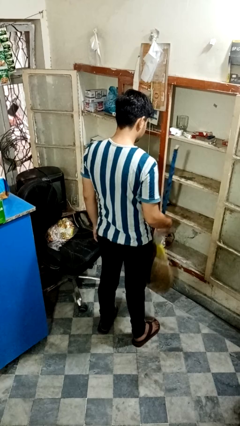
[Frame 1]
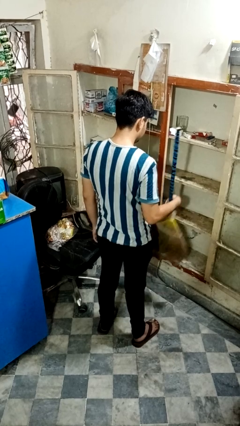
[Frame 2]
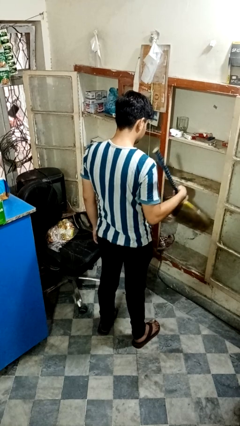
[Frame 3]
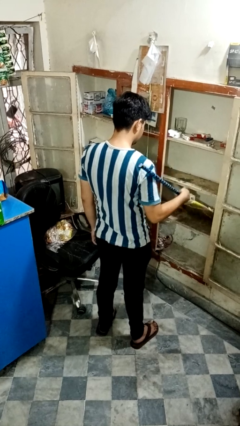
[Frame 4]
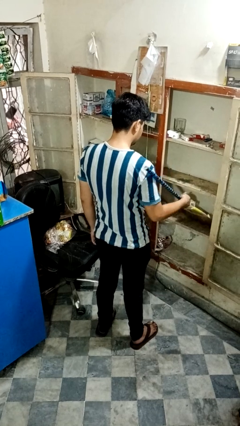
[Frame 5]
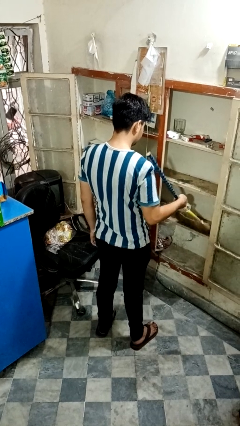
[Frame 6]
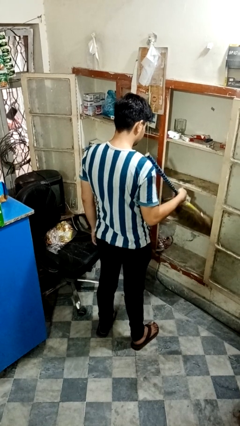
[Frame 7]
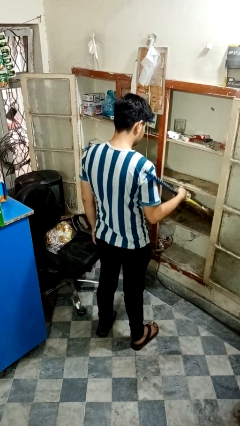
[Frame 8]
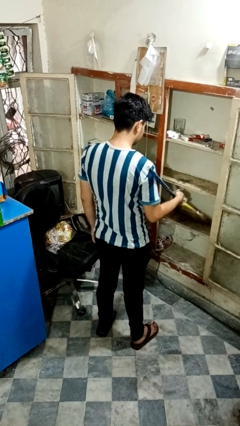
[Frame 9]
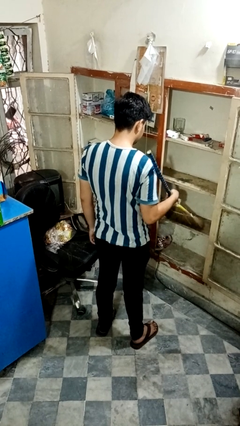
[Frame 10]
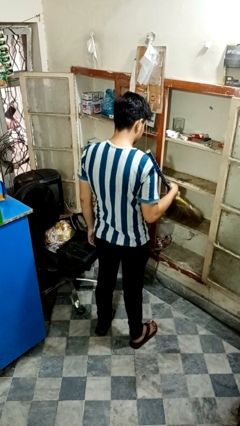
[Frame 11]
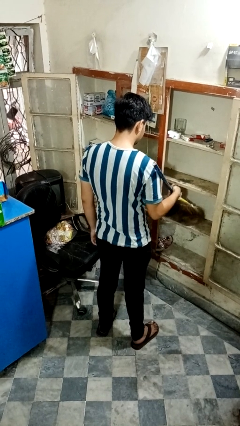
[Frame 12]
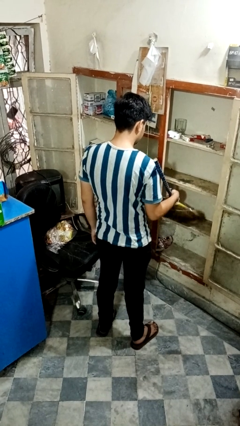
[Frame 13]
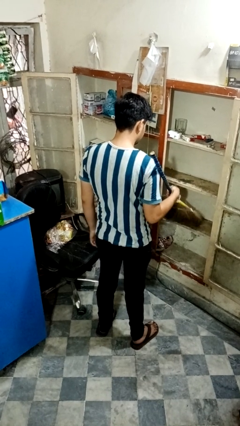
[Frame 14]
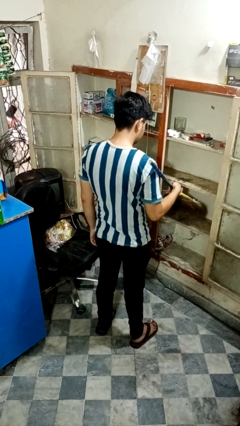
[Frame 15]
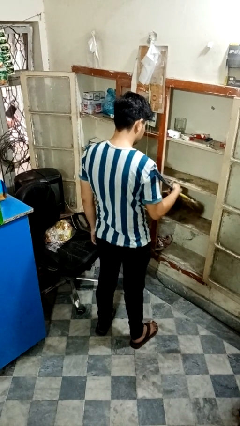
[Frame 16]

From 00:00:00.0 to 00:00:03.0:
person dusts furniture

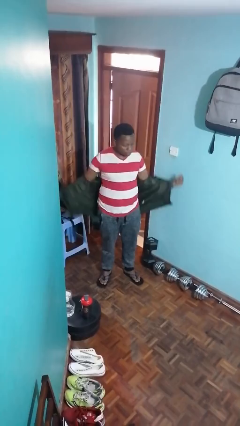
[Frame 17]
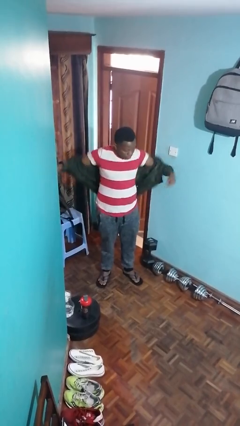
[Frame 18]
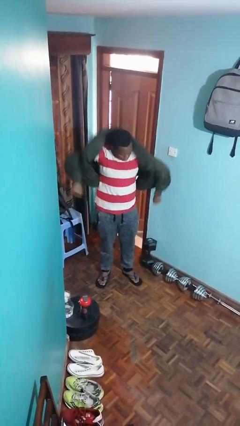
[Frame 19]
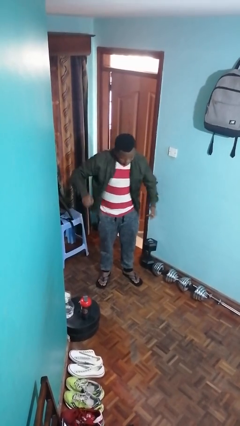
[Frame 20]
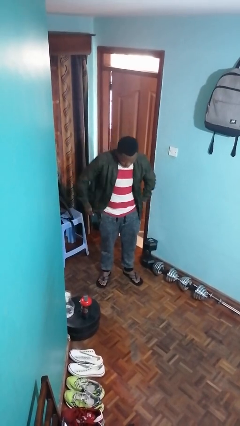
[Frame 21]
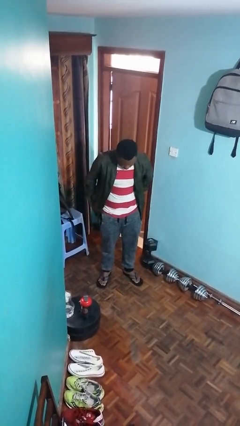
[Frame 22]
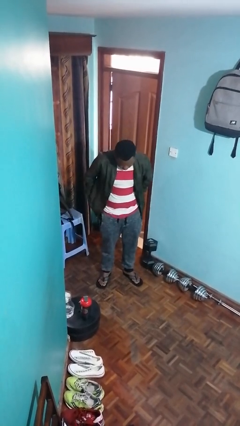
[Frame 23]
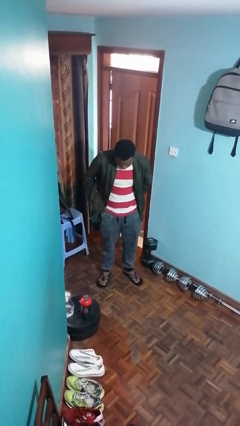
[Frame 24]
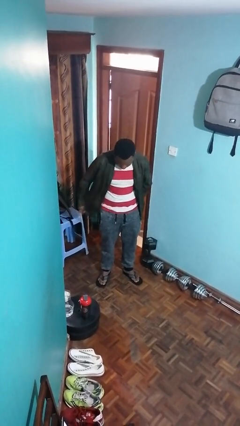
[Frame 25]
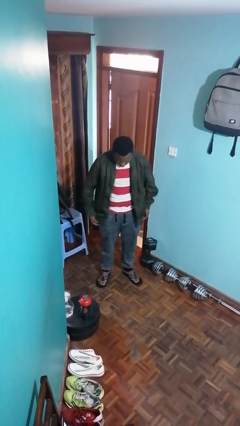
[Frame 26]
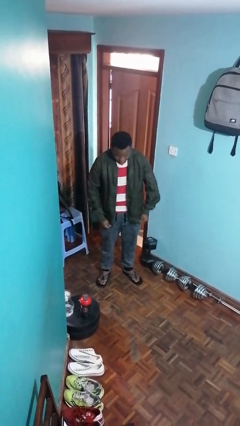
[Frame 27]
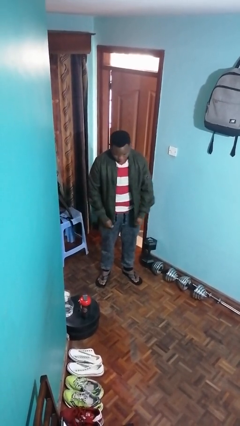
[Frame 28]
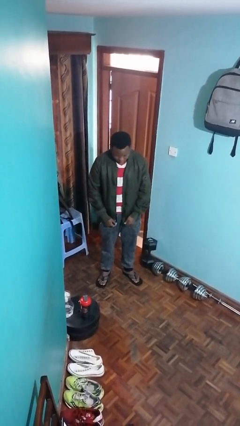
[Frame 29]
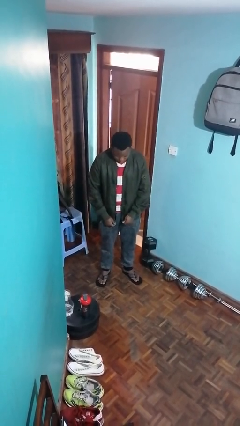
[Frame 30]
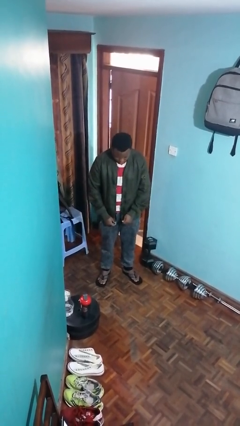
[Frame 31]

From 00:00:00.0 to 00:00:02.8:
person puts on jacket

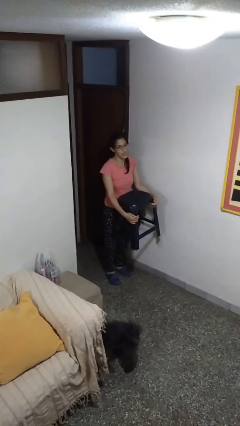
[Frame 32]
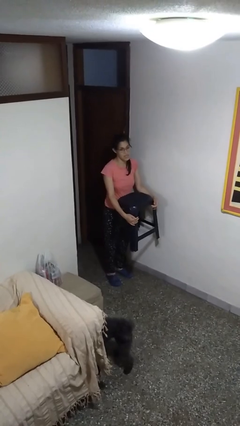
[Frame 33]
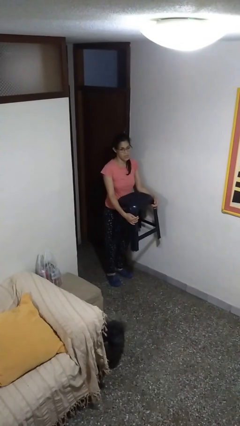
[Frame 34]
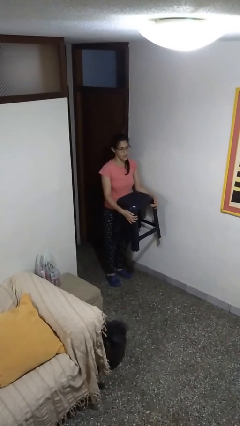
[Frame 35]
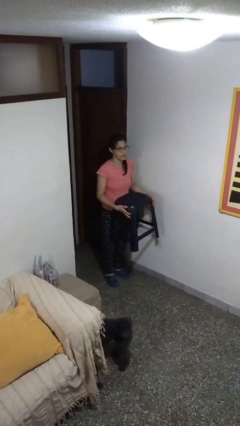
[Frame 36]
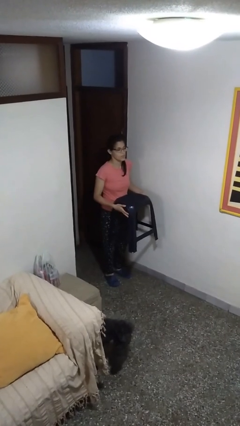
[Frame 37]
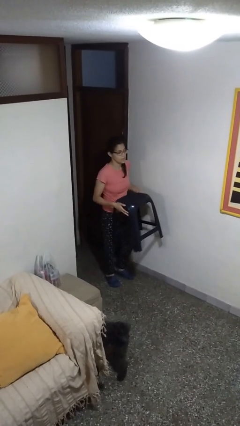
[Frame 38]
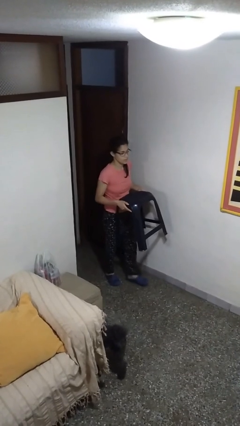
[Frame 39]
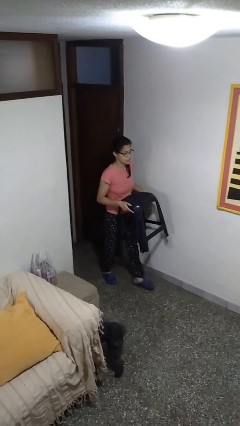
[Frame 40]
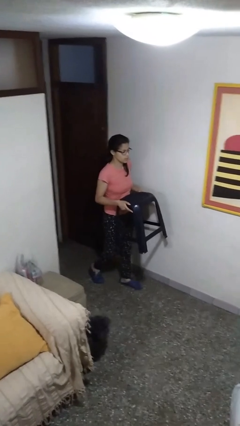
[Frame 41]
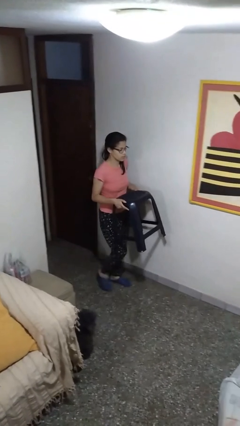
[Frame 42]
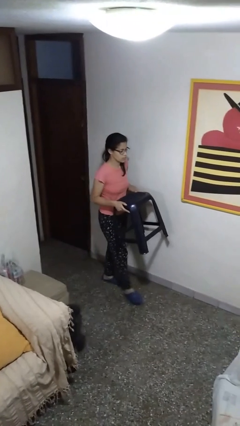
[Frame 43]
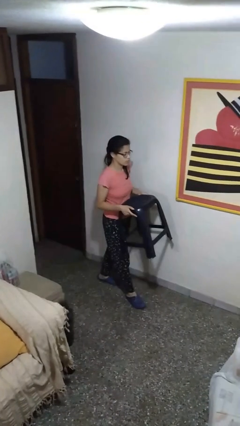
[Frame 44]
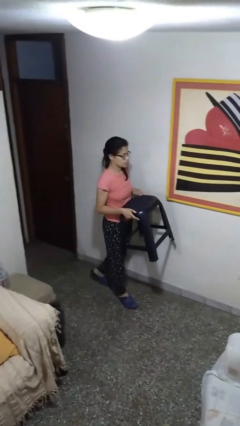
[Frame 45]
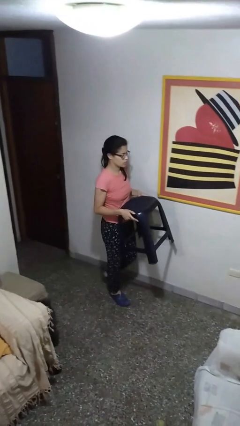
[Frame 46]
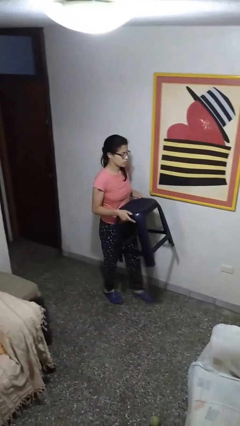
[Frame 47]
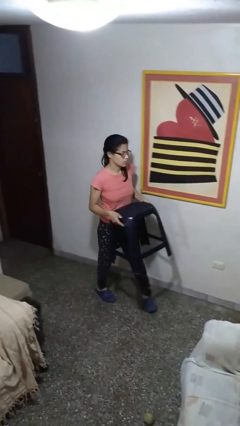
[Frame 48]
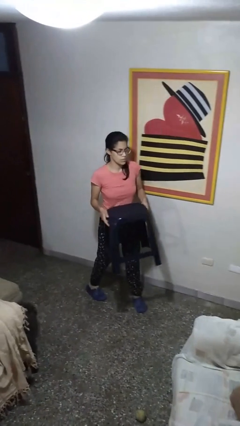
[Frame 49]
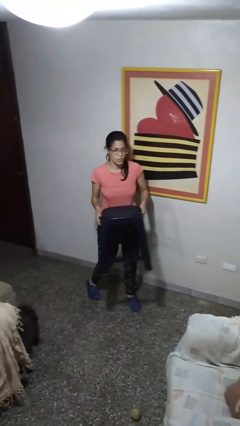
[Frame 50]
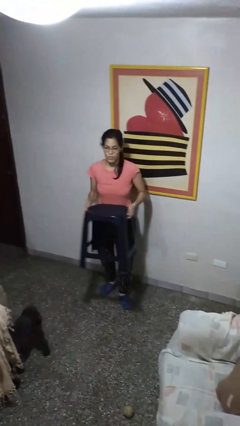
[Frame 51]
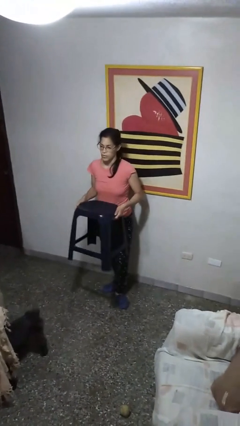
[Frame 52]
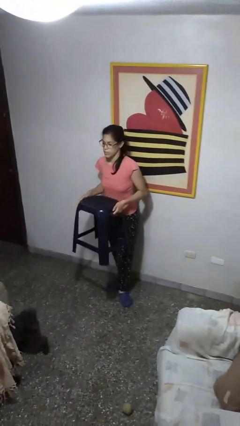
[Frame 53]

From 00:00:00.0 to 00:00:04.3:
person carries furniture

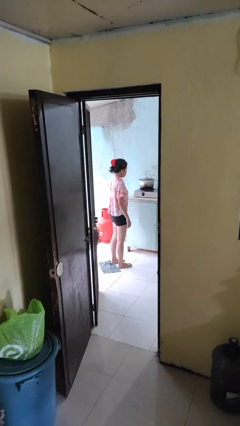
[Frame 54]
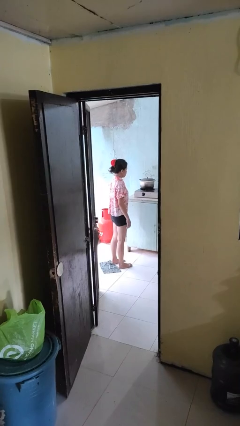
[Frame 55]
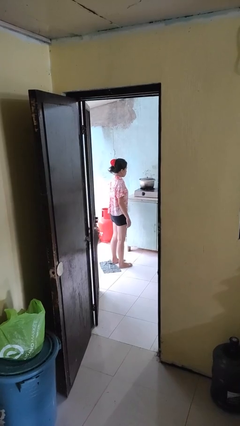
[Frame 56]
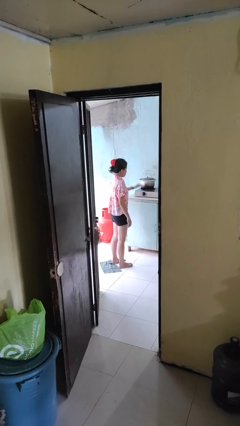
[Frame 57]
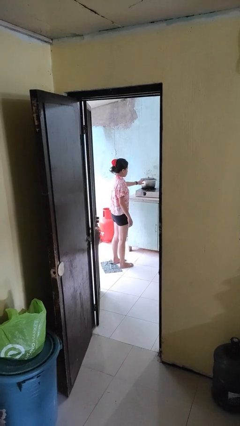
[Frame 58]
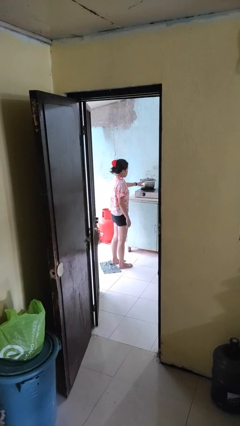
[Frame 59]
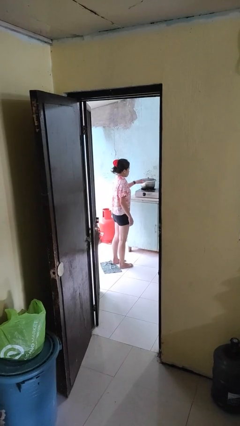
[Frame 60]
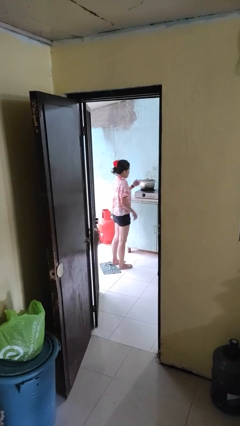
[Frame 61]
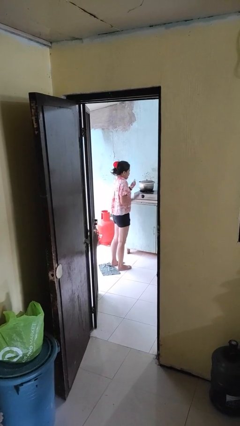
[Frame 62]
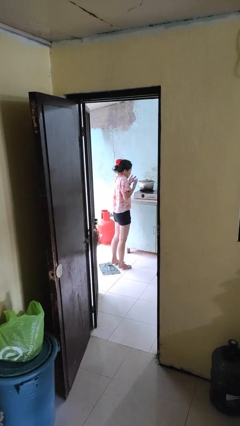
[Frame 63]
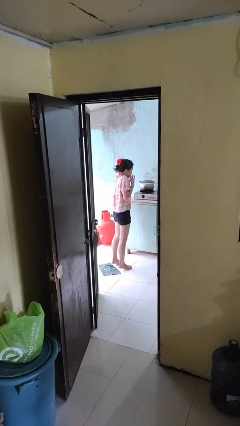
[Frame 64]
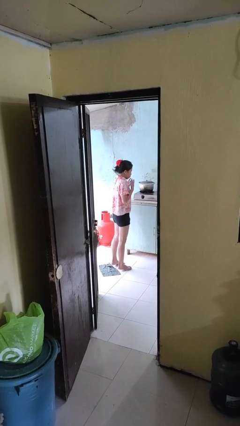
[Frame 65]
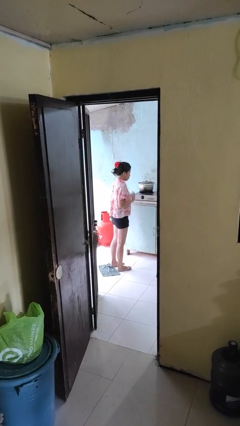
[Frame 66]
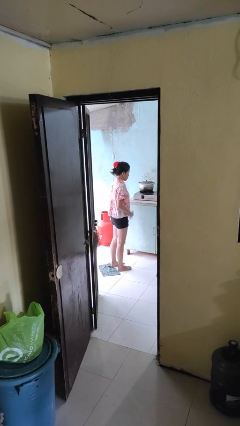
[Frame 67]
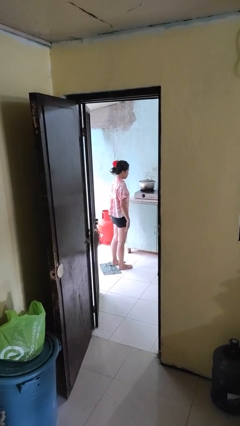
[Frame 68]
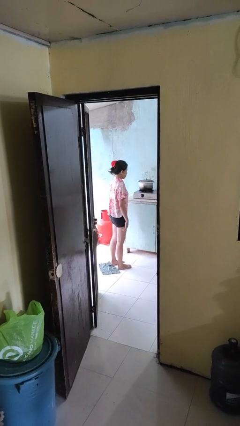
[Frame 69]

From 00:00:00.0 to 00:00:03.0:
person burns hand

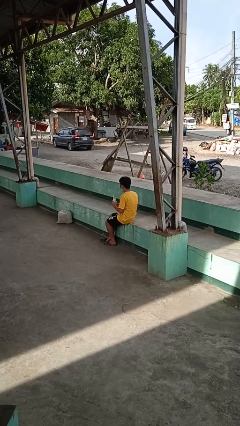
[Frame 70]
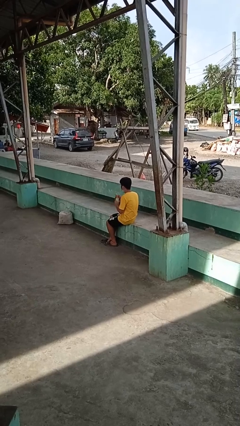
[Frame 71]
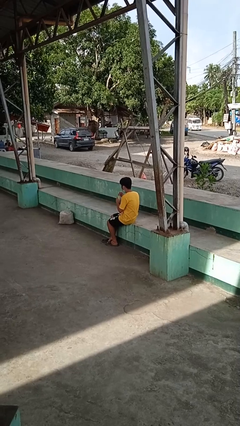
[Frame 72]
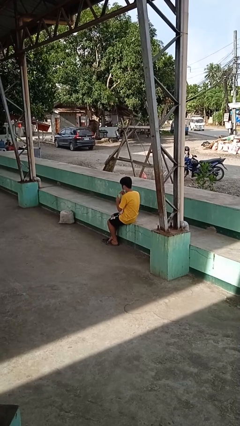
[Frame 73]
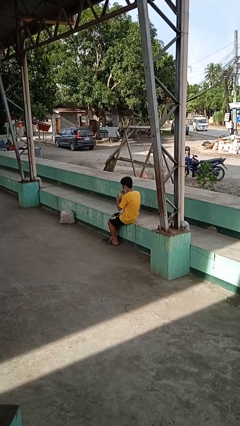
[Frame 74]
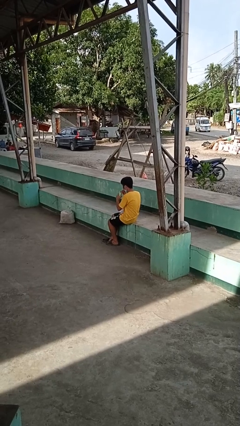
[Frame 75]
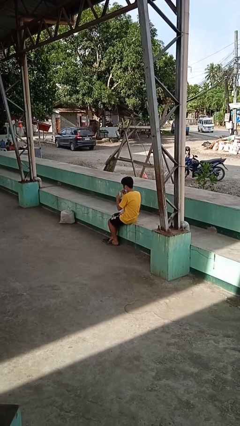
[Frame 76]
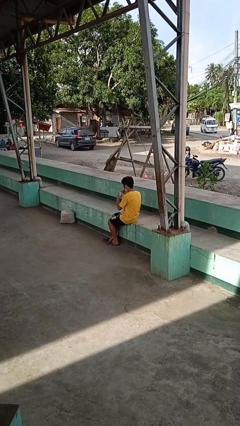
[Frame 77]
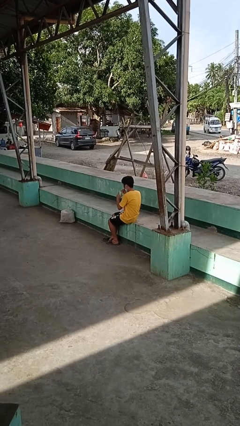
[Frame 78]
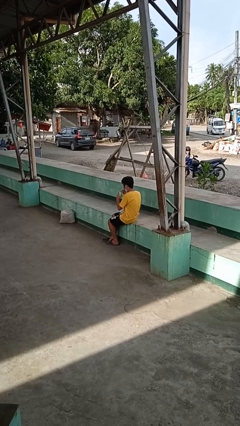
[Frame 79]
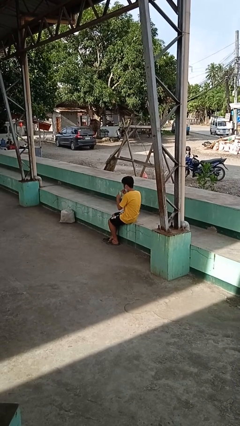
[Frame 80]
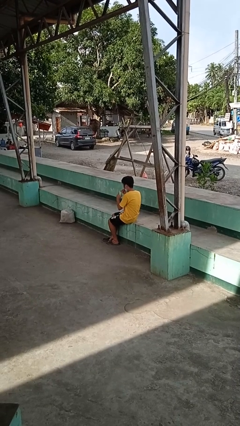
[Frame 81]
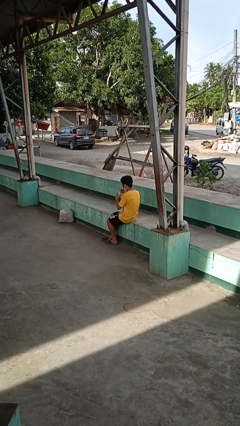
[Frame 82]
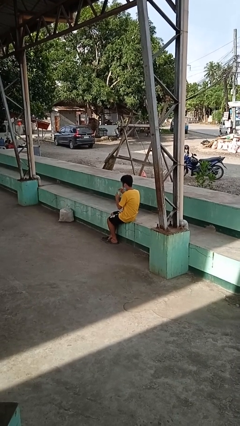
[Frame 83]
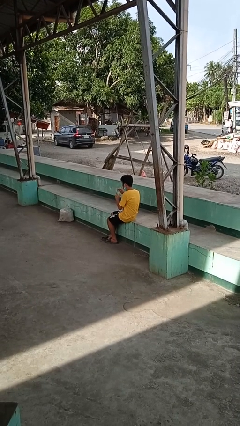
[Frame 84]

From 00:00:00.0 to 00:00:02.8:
person drinks from straw

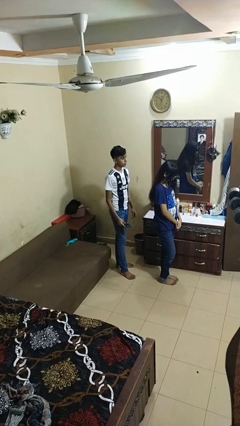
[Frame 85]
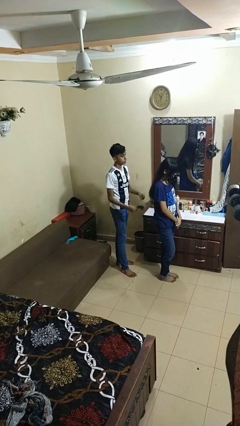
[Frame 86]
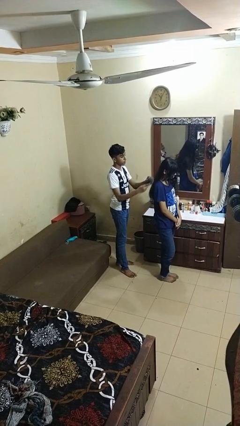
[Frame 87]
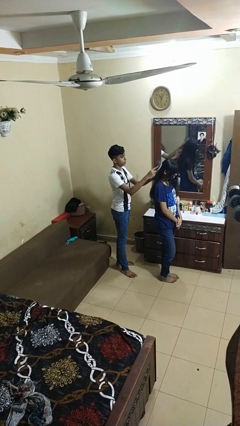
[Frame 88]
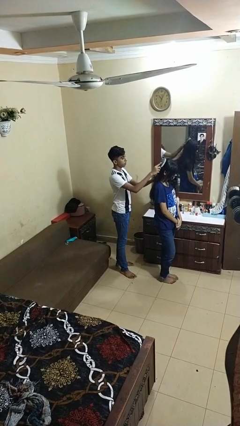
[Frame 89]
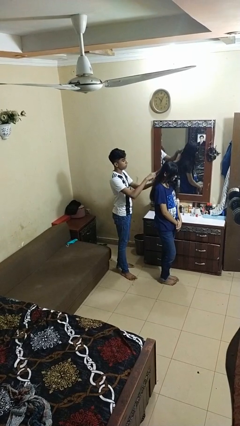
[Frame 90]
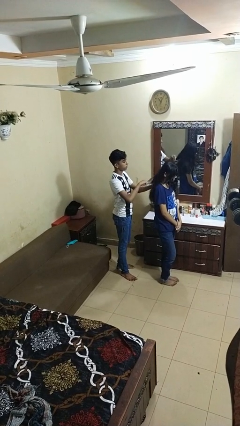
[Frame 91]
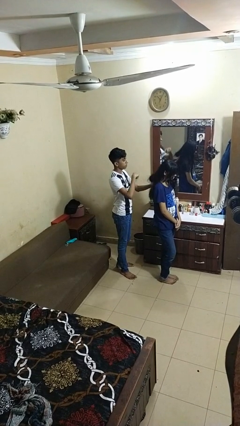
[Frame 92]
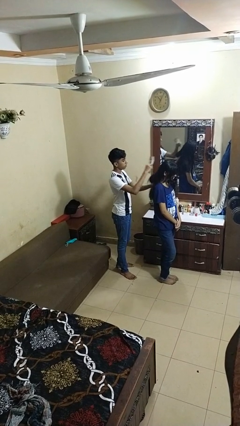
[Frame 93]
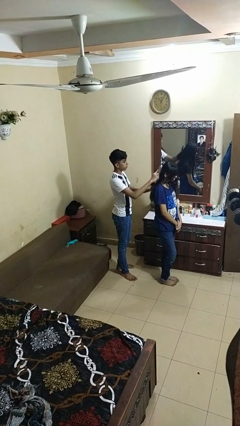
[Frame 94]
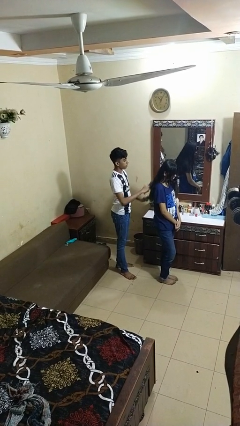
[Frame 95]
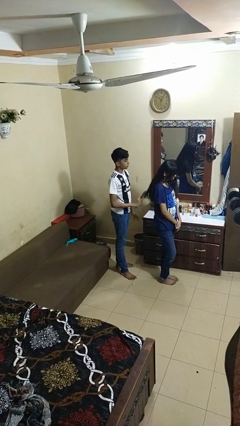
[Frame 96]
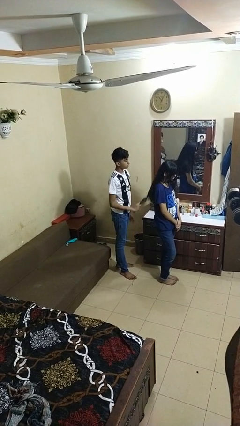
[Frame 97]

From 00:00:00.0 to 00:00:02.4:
person brushes hair of person
